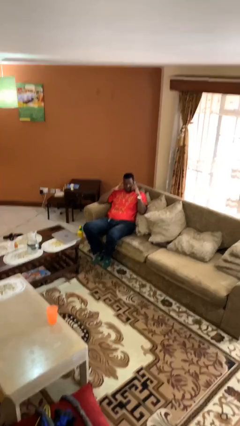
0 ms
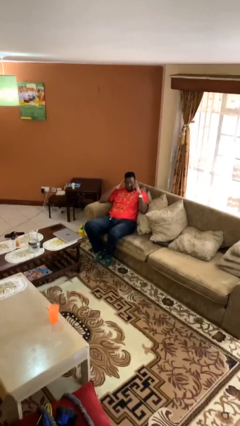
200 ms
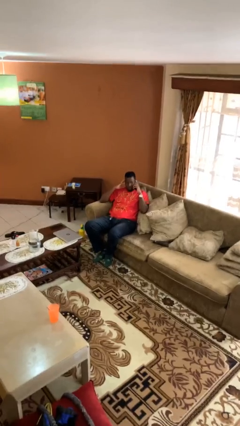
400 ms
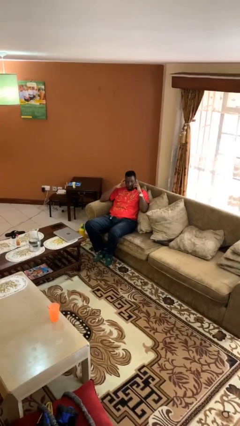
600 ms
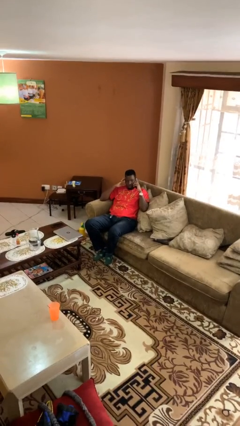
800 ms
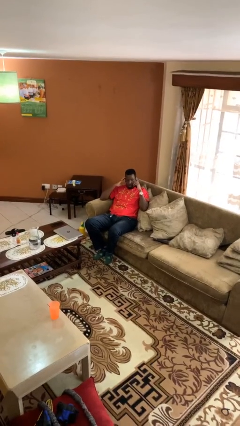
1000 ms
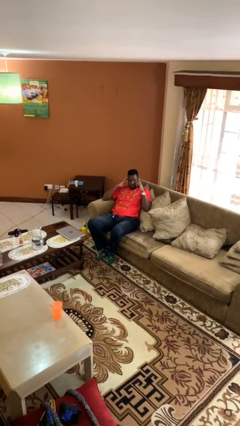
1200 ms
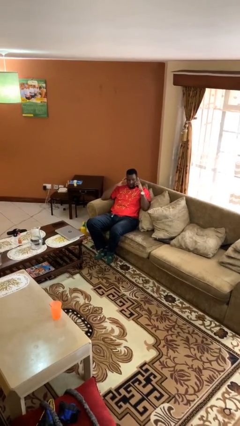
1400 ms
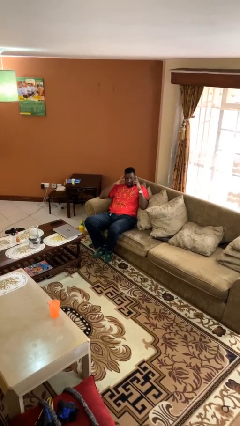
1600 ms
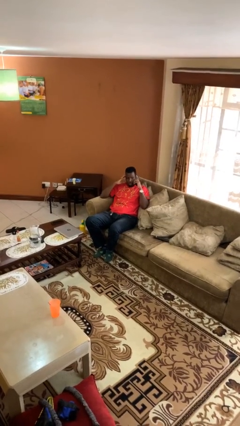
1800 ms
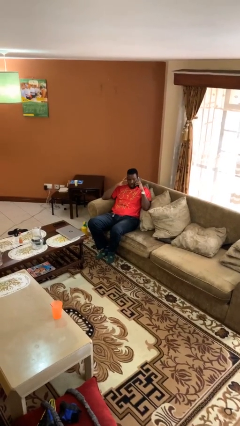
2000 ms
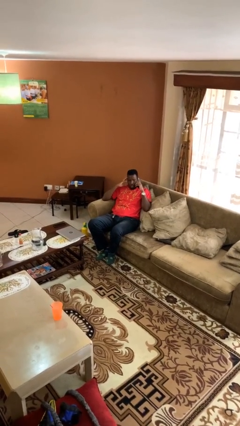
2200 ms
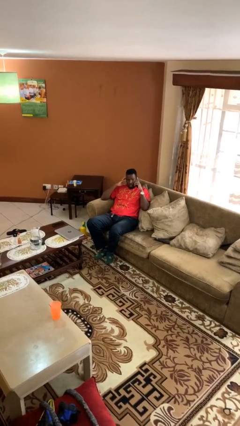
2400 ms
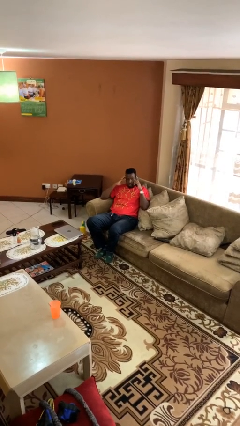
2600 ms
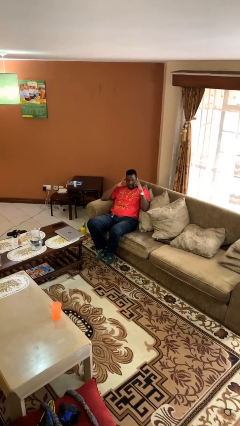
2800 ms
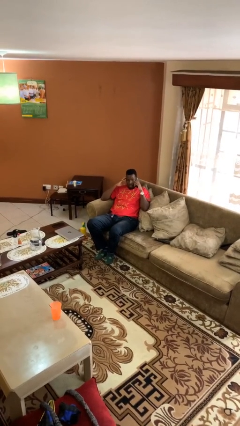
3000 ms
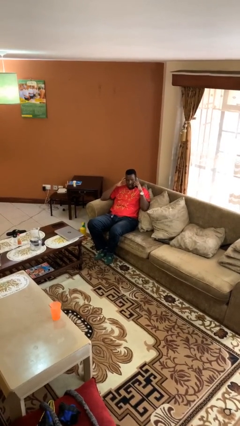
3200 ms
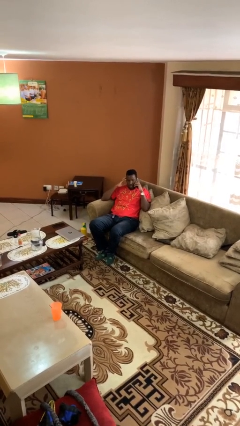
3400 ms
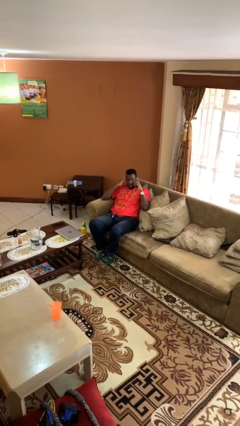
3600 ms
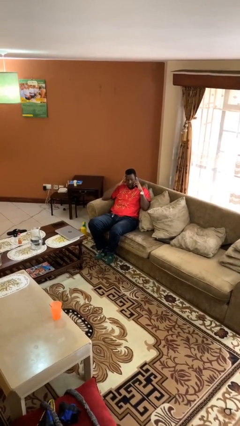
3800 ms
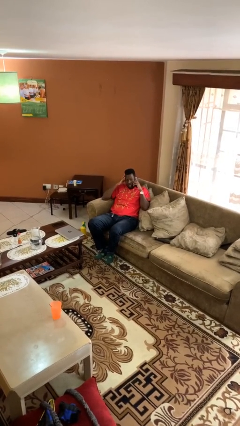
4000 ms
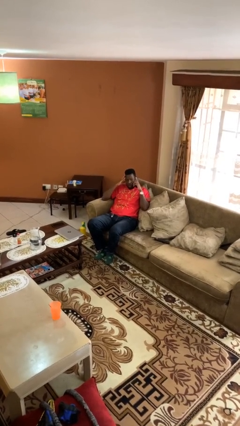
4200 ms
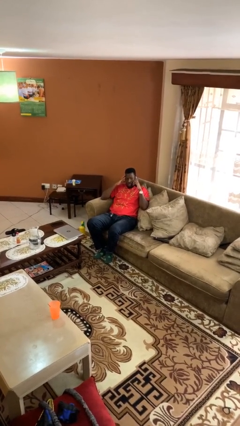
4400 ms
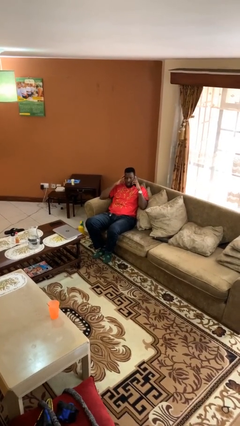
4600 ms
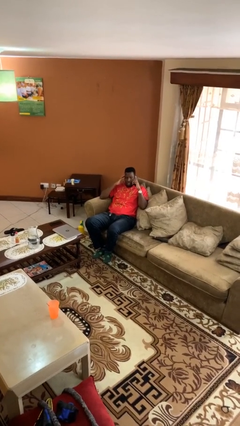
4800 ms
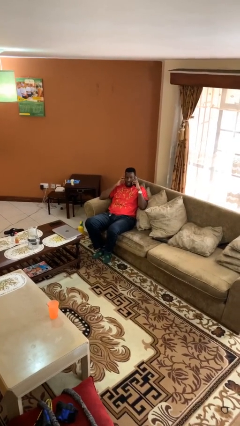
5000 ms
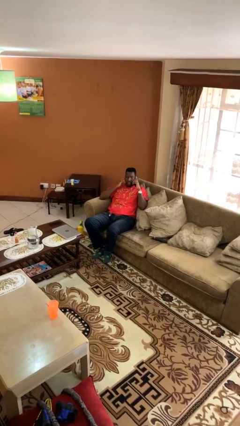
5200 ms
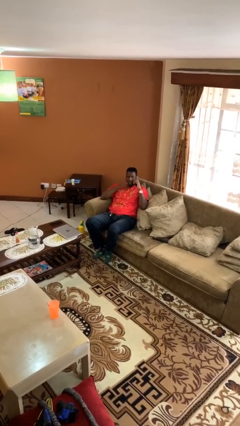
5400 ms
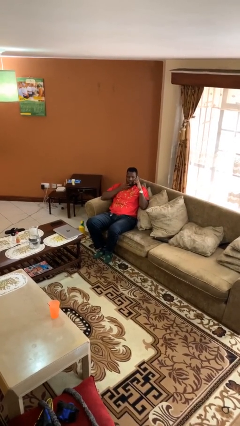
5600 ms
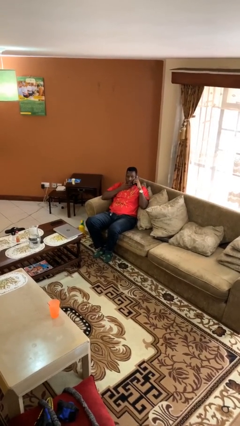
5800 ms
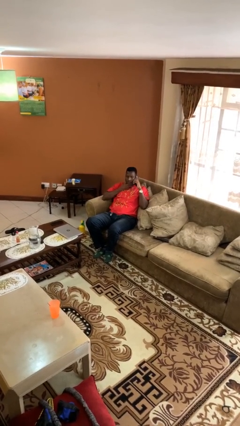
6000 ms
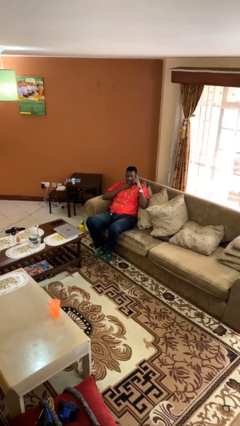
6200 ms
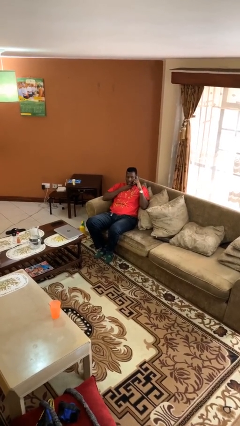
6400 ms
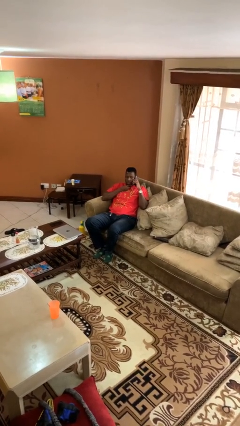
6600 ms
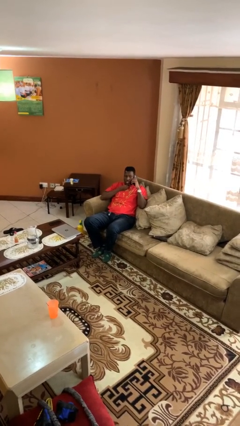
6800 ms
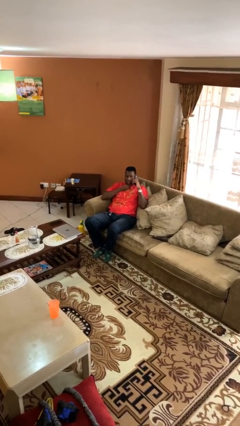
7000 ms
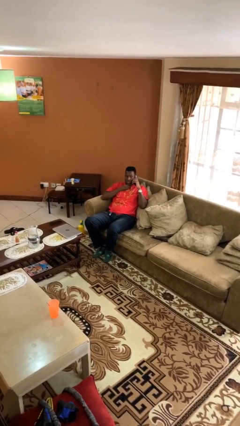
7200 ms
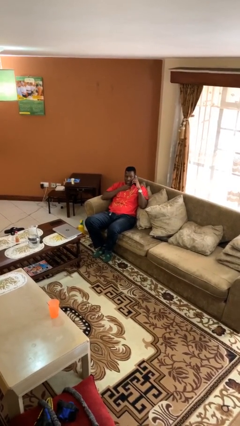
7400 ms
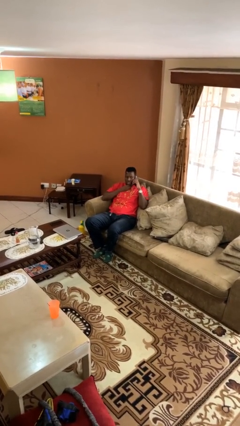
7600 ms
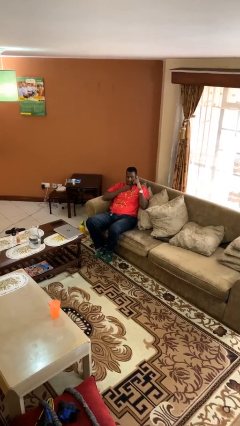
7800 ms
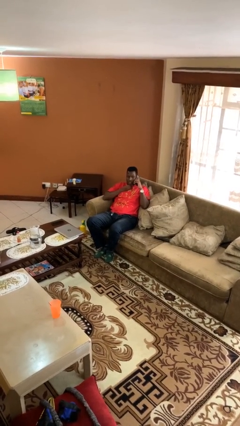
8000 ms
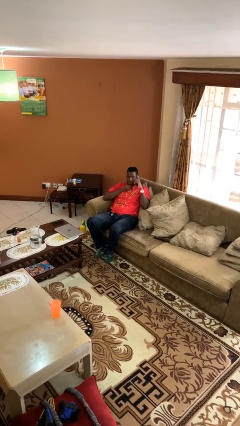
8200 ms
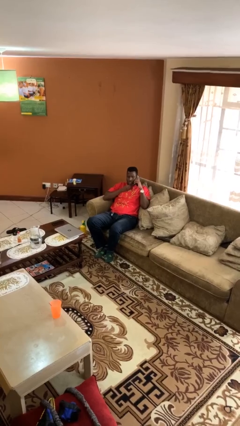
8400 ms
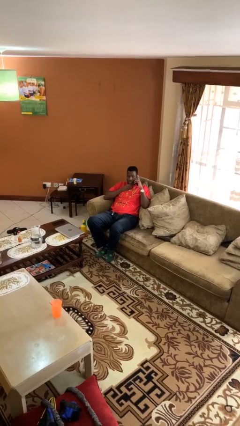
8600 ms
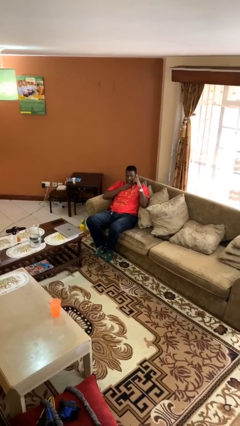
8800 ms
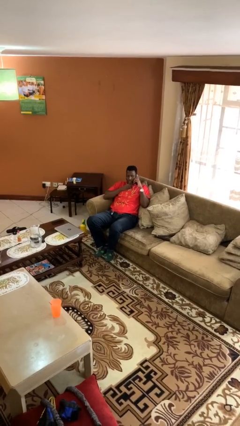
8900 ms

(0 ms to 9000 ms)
person talks on phone

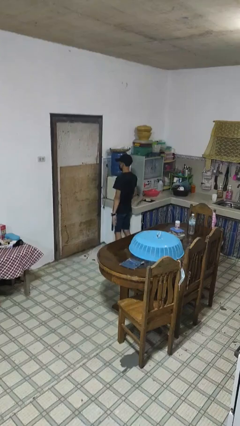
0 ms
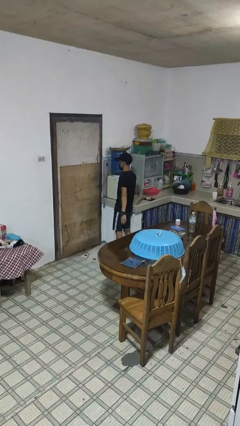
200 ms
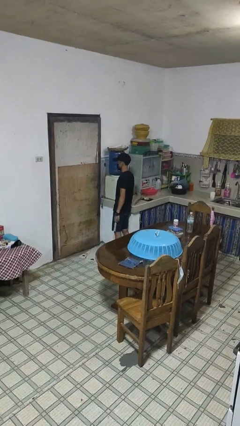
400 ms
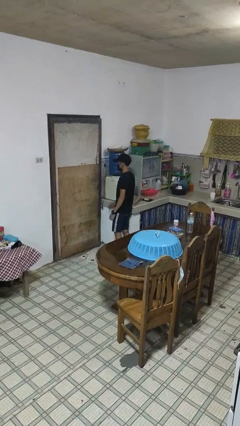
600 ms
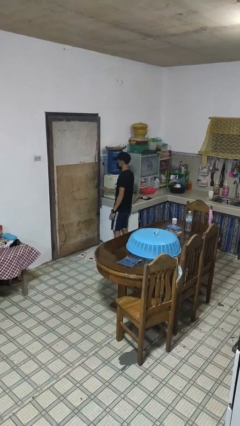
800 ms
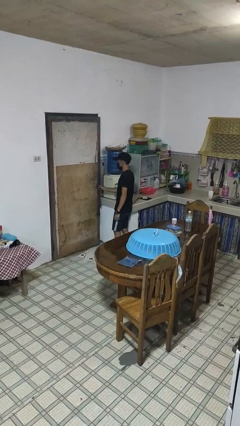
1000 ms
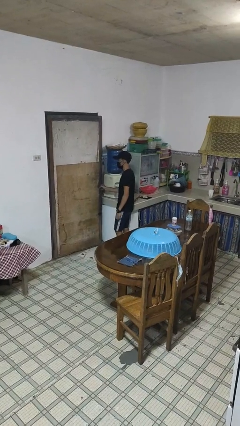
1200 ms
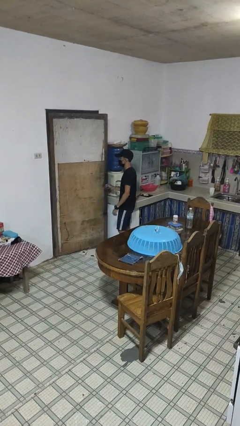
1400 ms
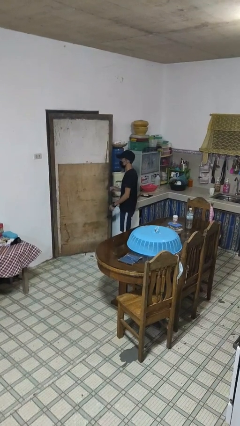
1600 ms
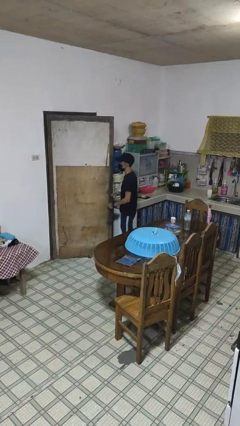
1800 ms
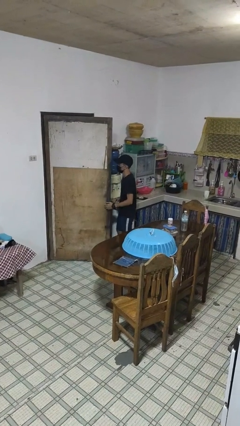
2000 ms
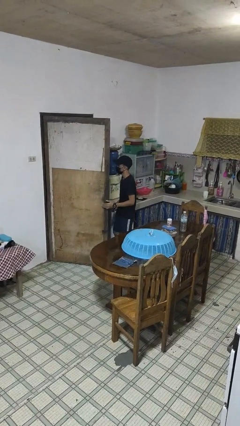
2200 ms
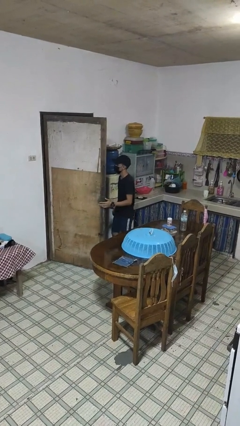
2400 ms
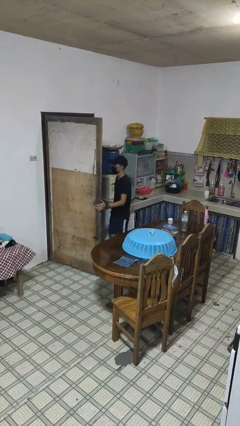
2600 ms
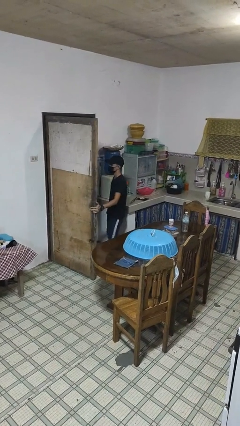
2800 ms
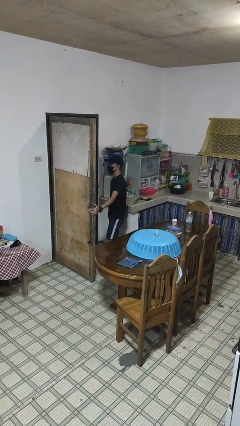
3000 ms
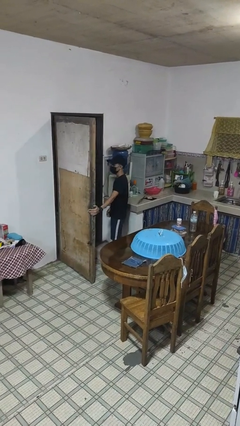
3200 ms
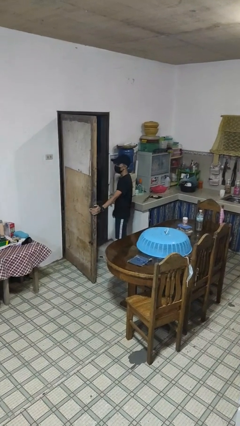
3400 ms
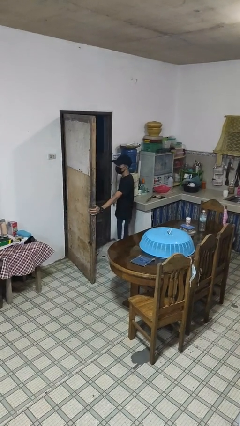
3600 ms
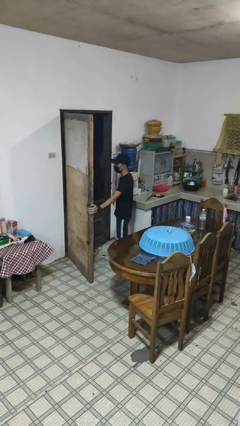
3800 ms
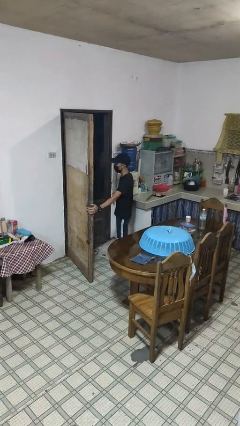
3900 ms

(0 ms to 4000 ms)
person opens facility door

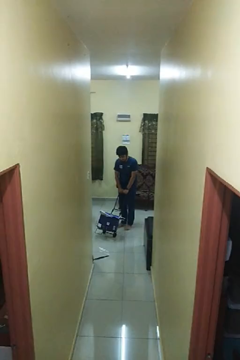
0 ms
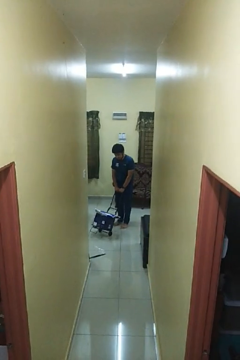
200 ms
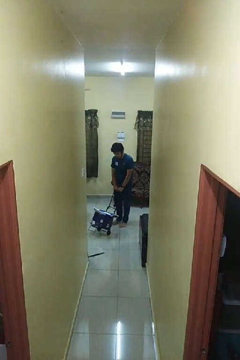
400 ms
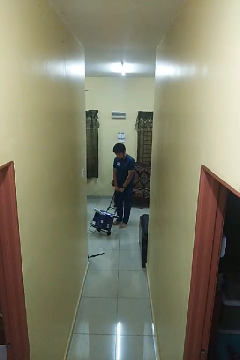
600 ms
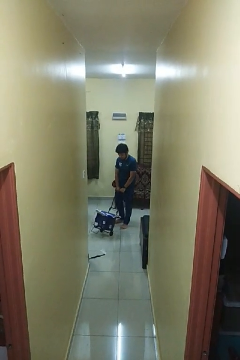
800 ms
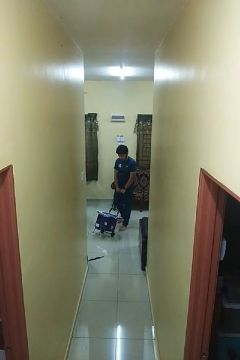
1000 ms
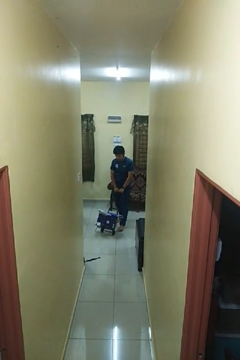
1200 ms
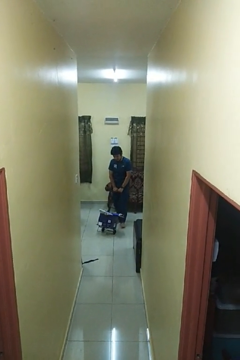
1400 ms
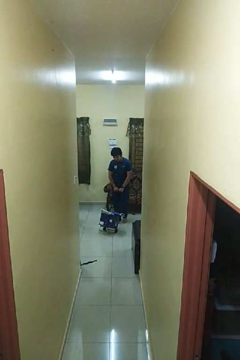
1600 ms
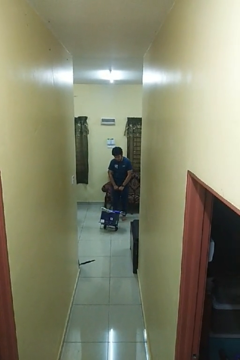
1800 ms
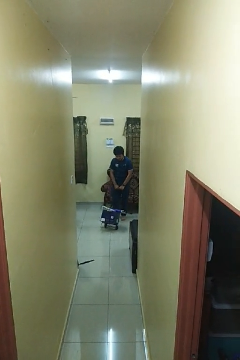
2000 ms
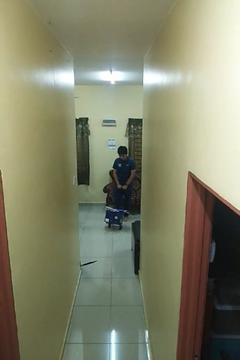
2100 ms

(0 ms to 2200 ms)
person pulls wheeled cart

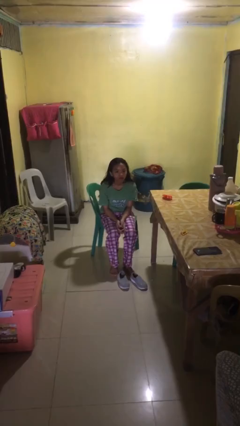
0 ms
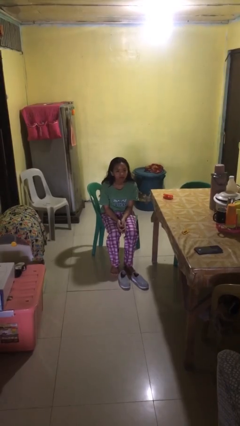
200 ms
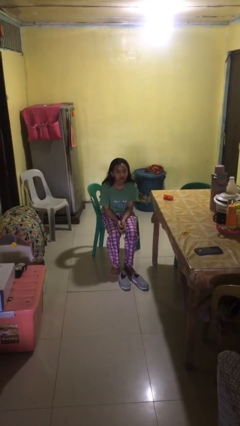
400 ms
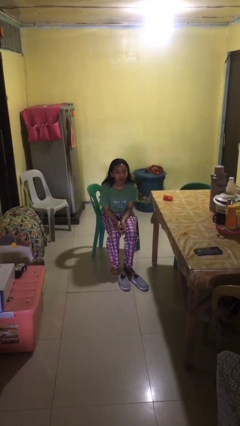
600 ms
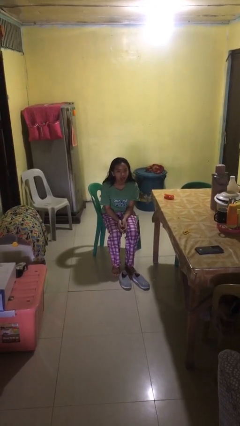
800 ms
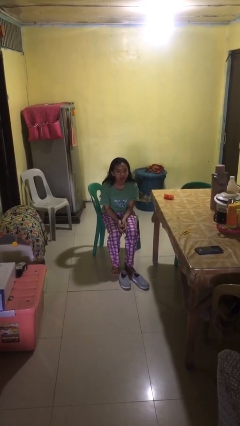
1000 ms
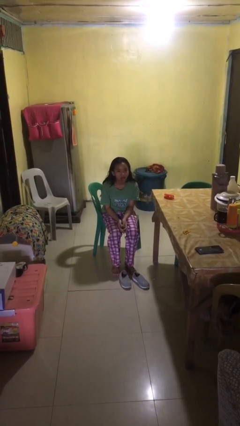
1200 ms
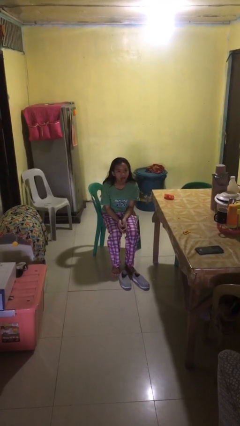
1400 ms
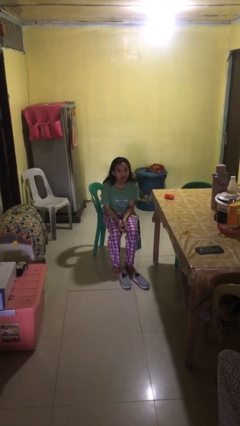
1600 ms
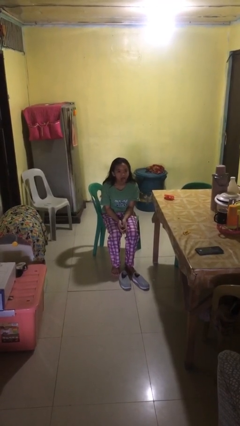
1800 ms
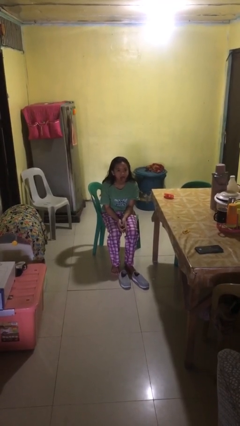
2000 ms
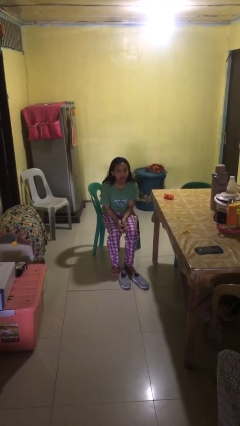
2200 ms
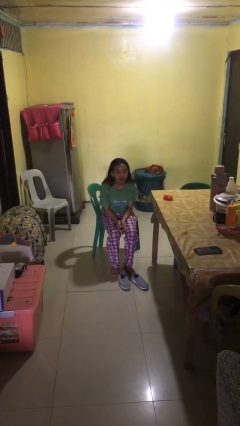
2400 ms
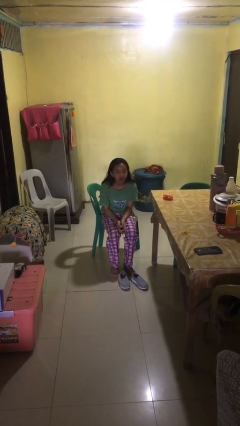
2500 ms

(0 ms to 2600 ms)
person sticks out tongue

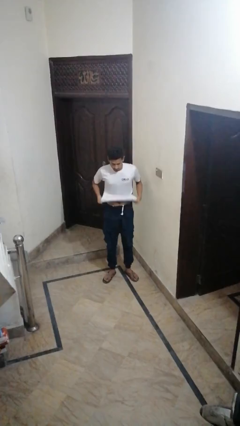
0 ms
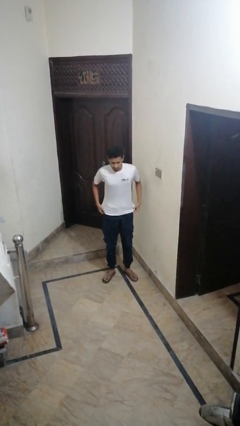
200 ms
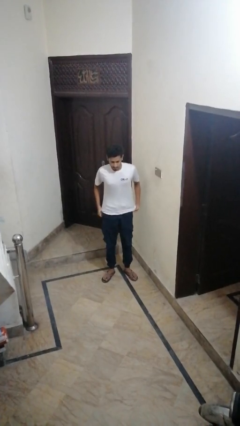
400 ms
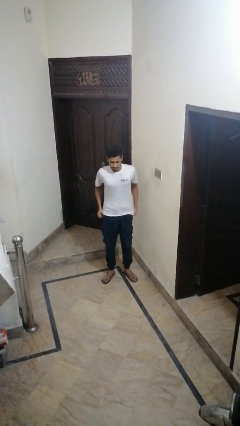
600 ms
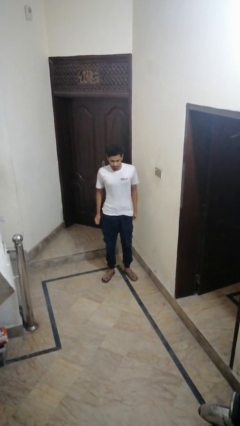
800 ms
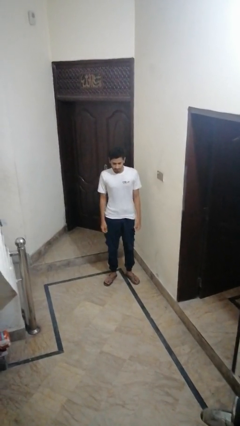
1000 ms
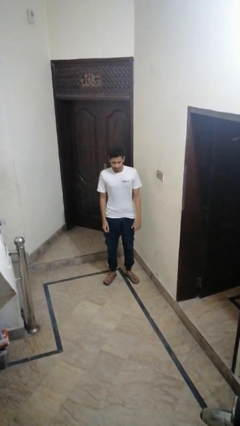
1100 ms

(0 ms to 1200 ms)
person untucks shirt
